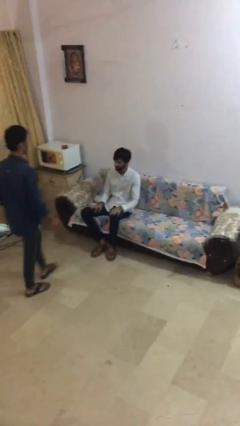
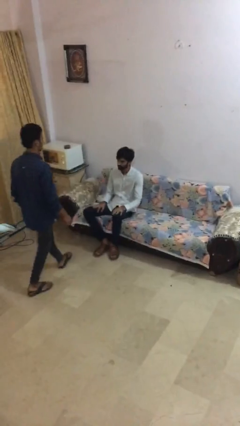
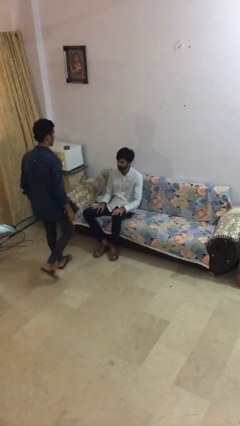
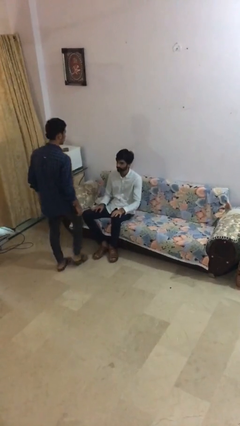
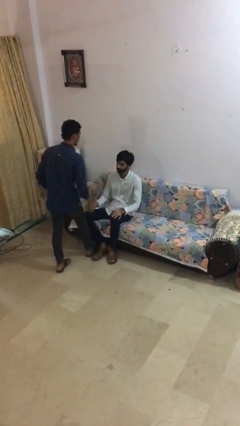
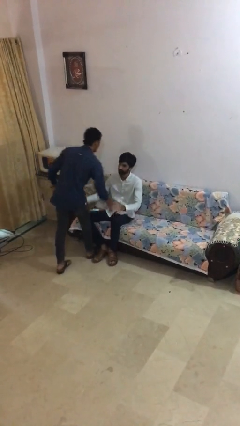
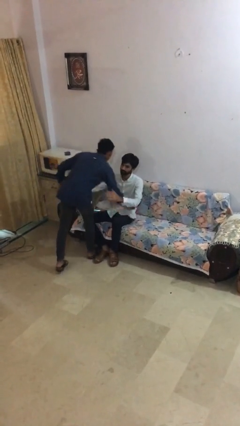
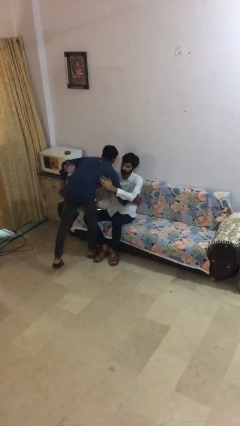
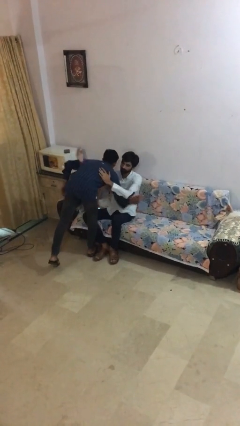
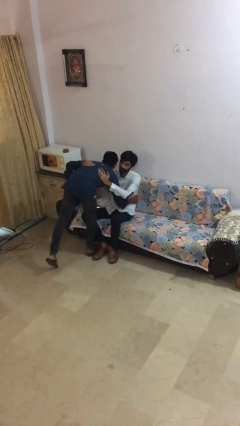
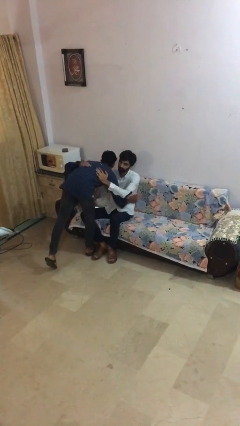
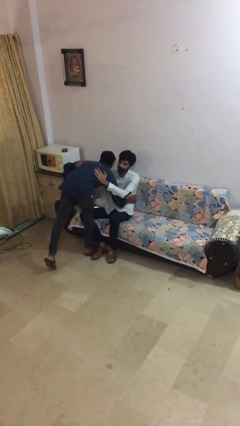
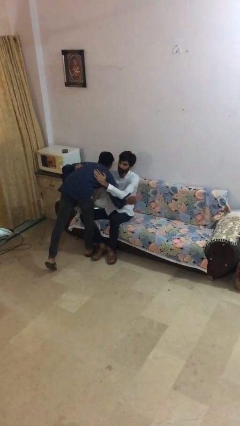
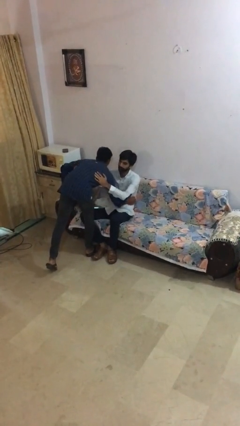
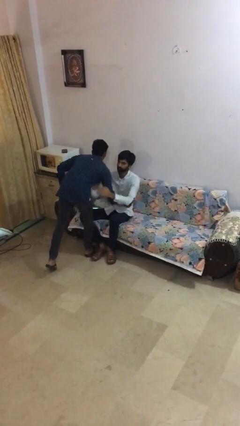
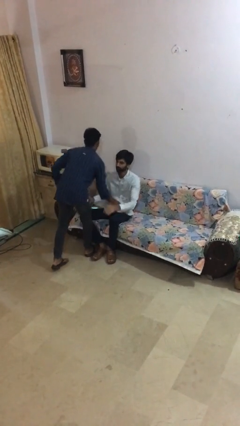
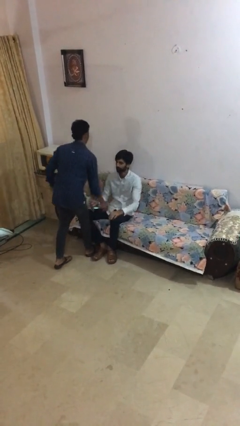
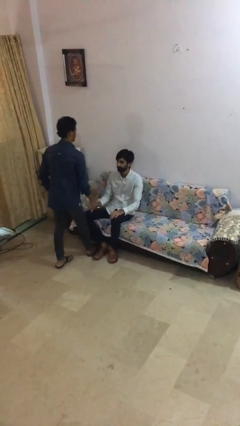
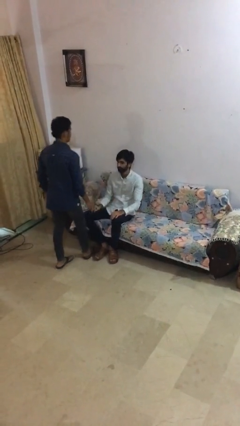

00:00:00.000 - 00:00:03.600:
person embraces person

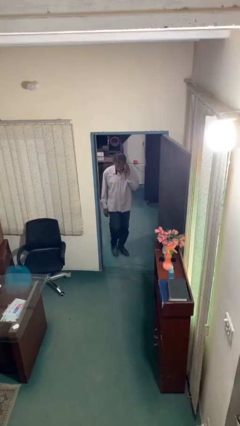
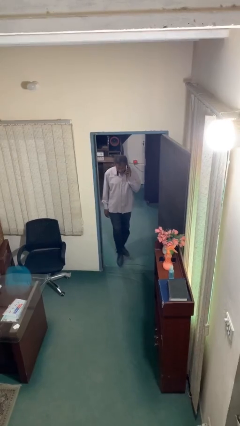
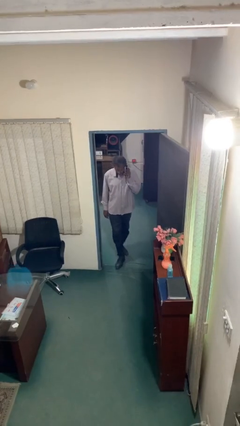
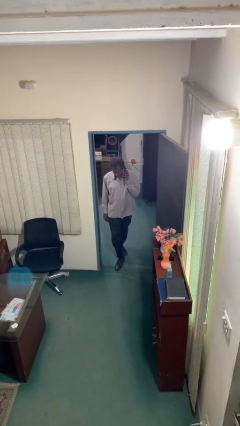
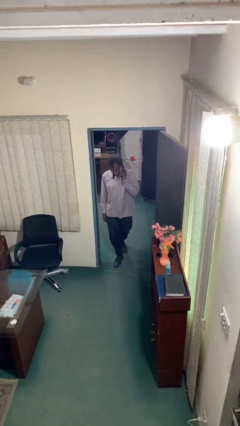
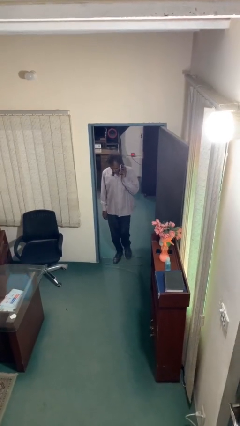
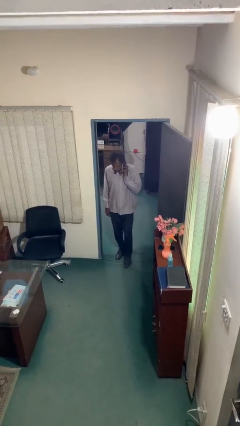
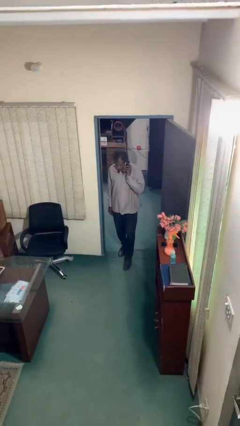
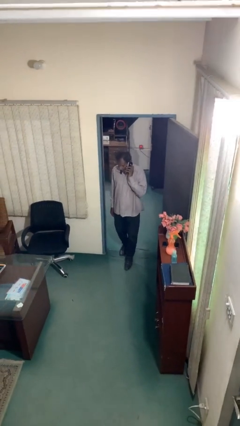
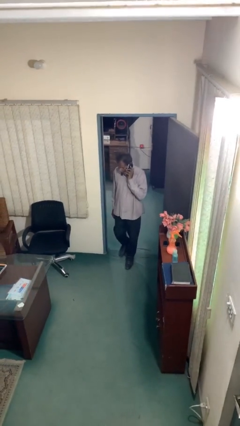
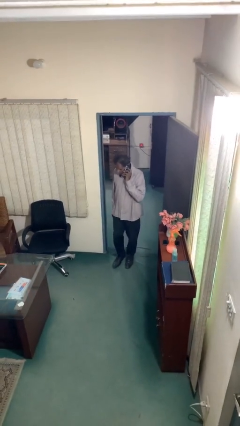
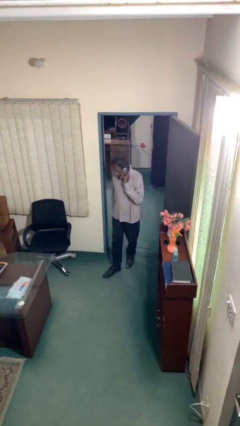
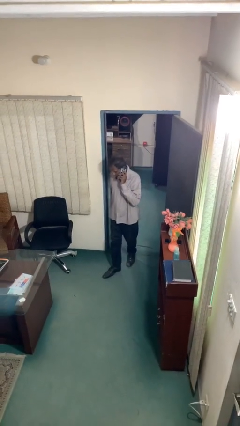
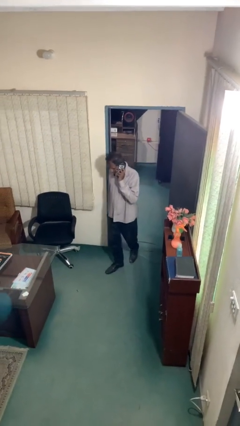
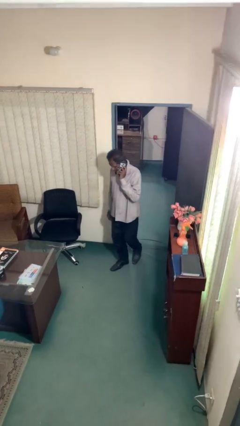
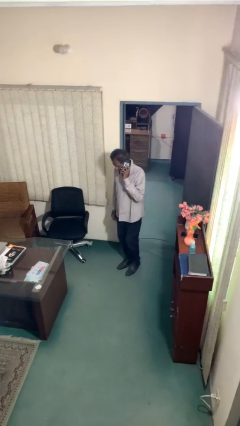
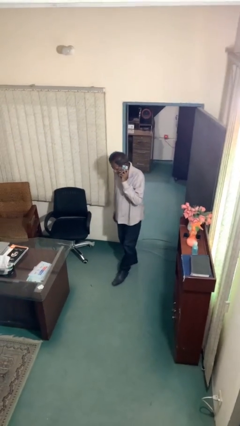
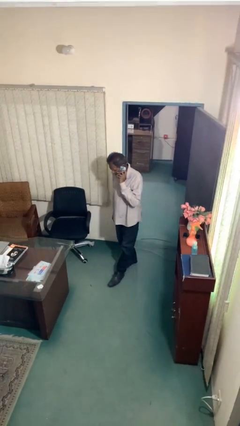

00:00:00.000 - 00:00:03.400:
person enters scene through structure

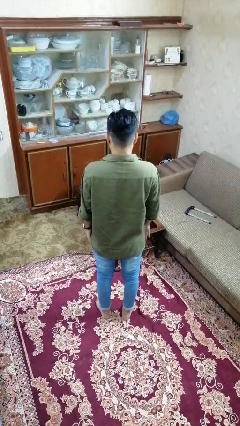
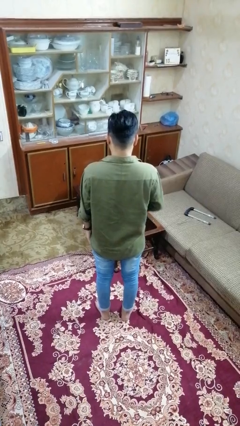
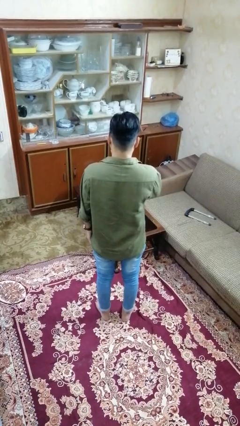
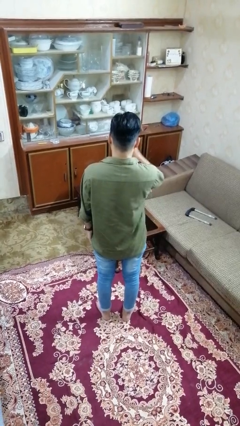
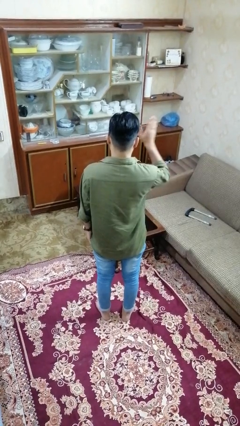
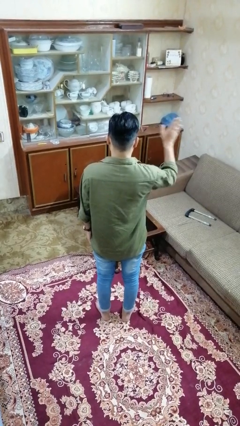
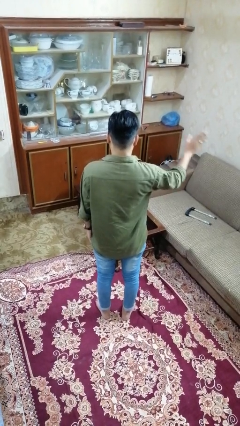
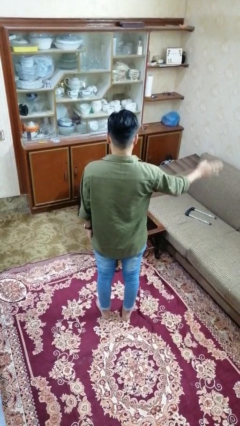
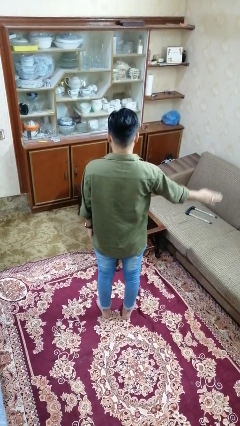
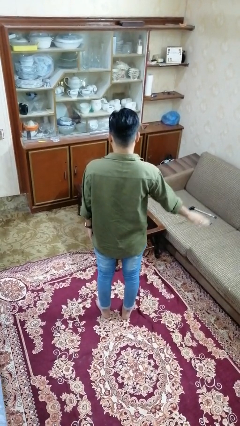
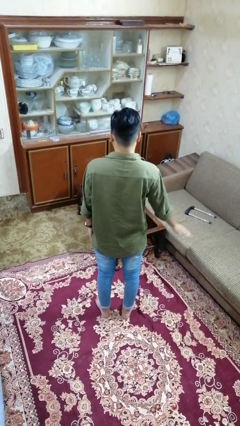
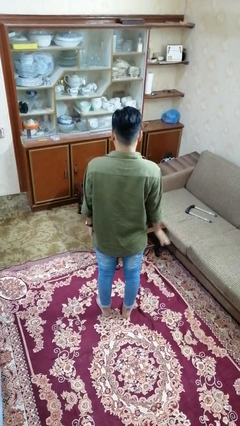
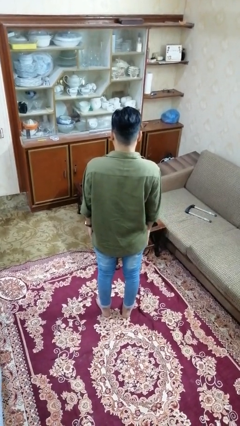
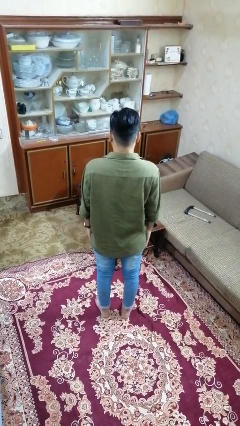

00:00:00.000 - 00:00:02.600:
person gestures swipe right

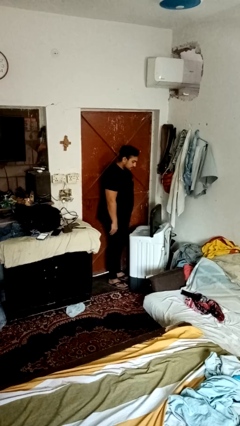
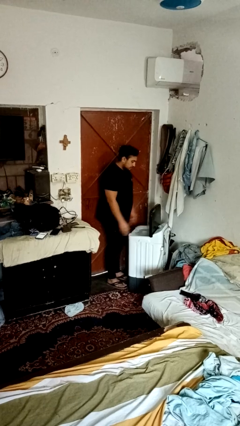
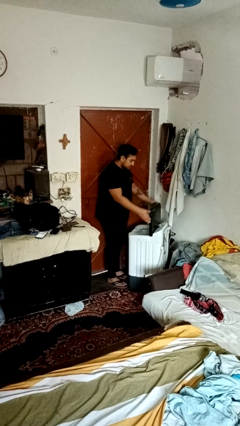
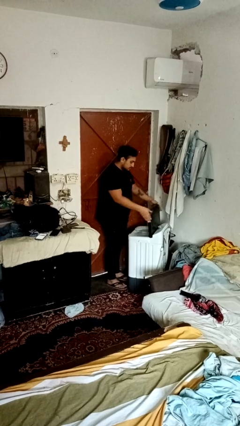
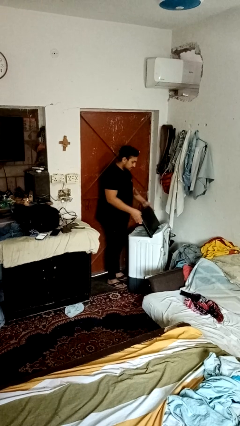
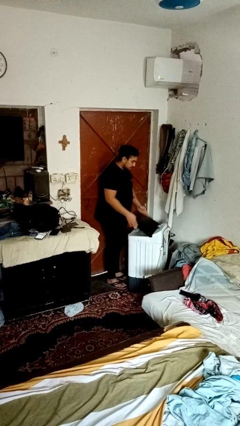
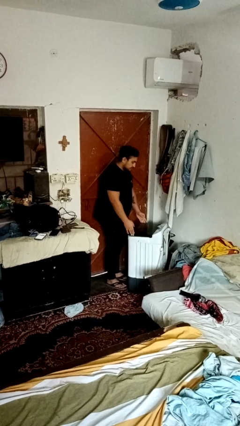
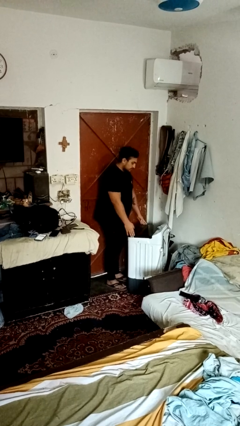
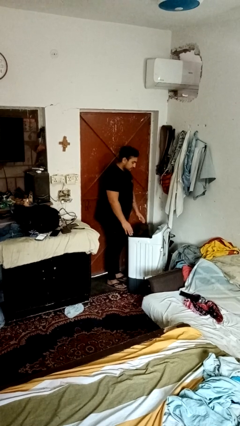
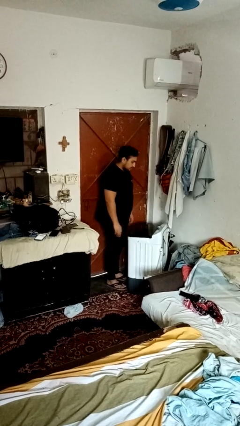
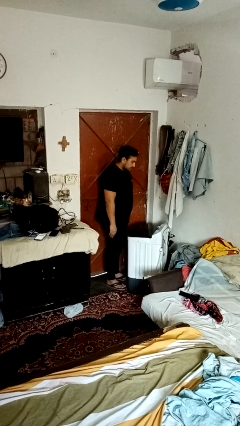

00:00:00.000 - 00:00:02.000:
person closes clothes washer

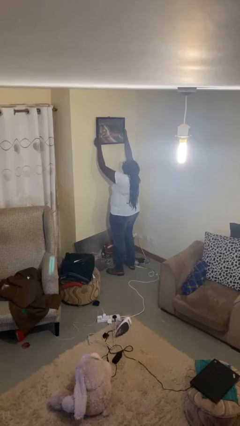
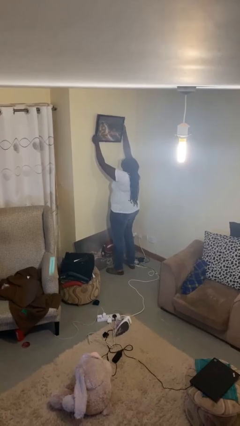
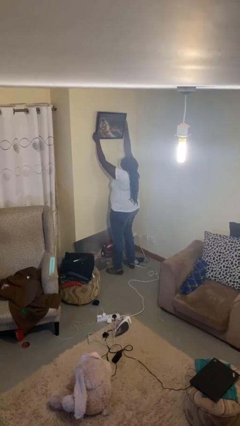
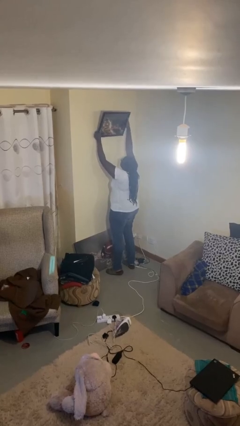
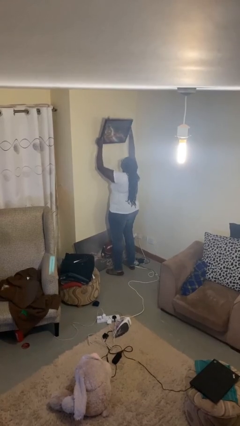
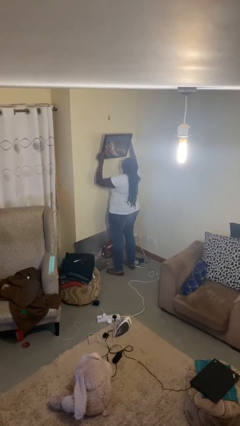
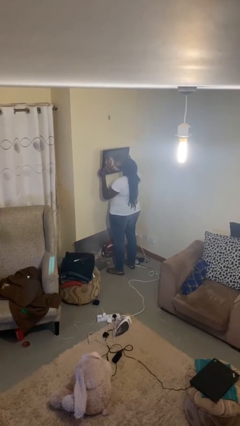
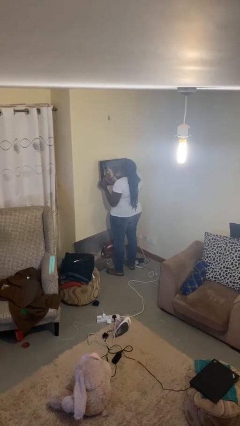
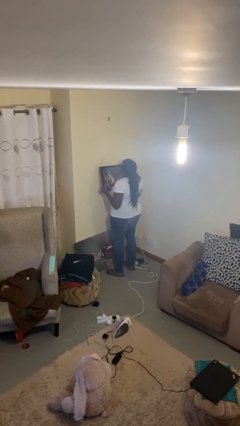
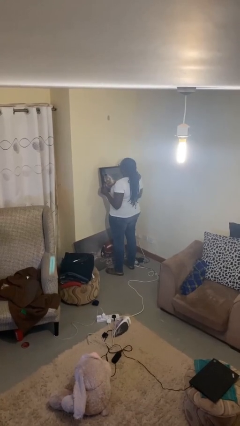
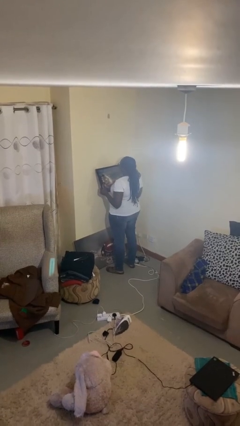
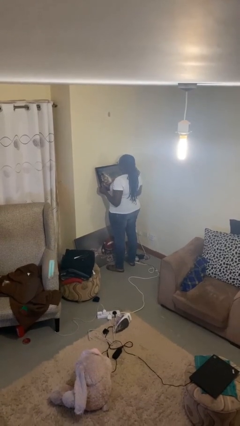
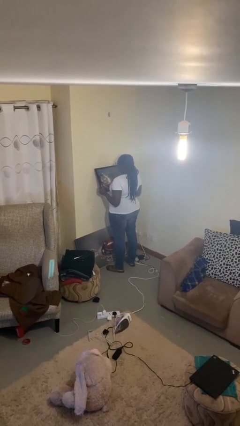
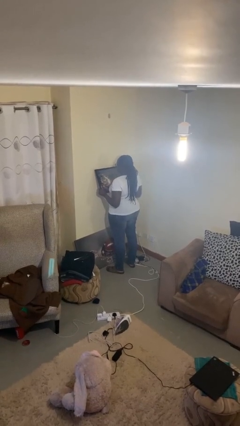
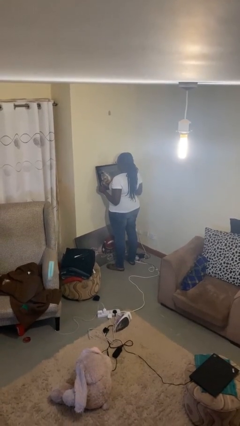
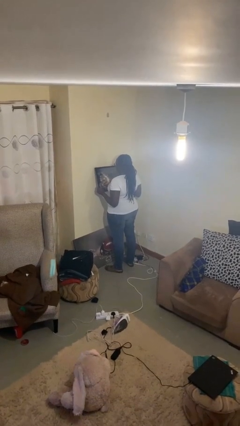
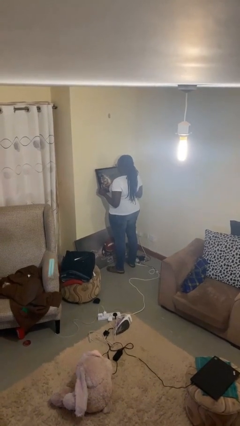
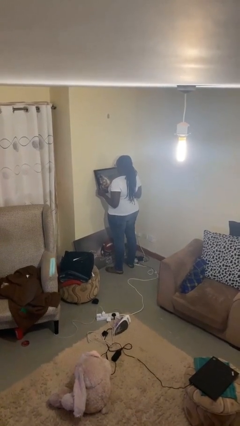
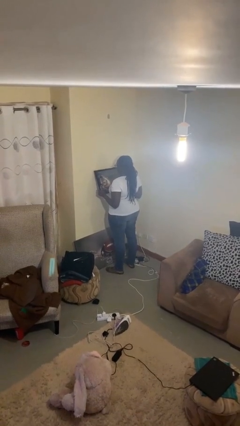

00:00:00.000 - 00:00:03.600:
person takes down picture frame

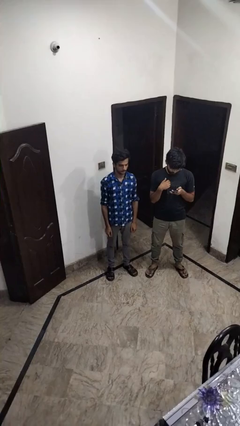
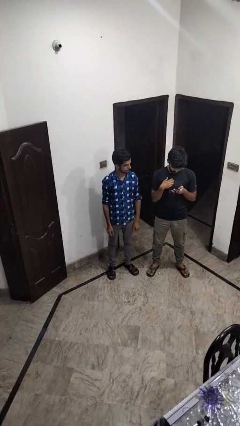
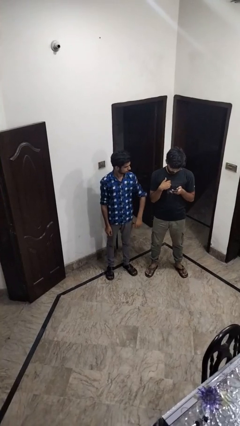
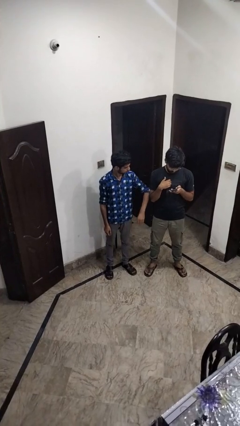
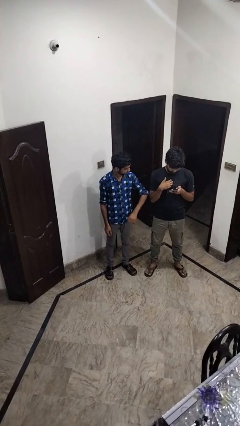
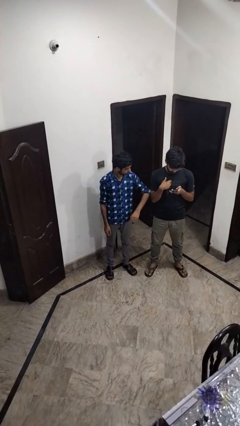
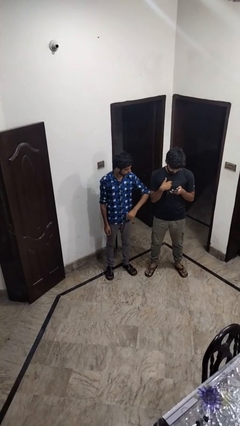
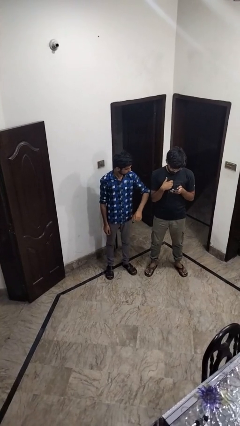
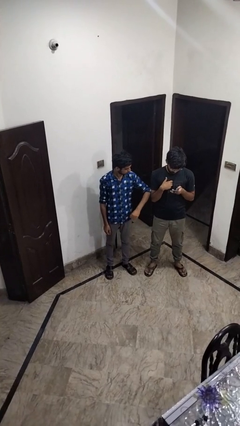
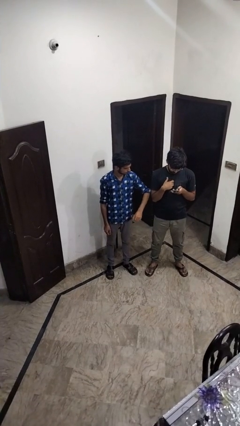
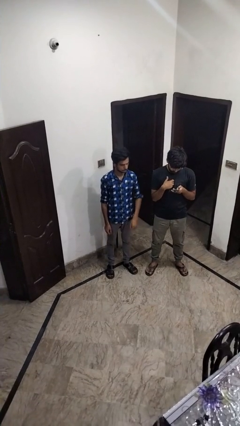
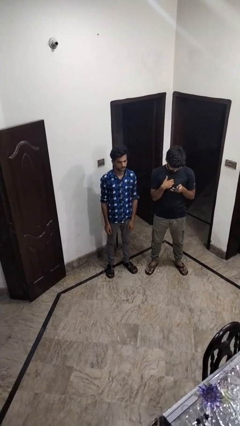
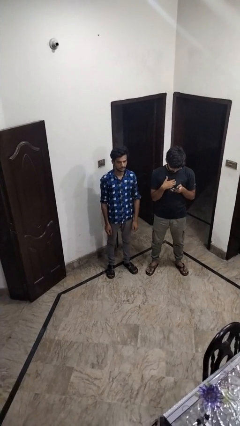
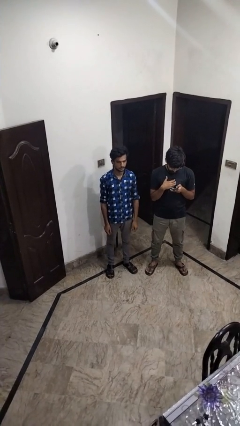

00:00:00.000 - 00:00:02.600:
person nudges person with elbow
